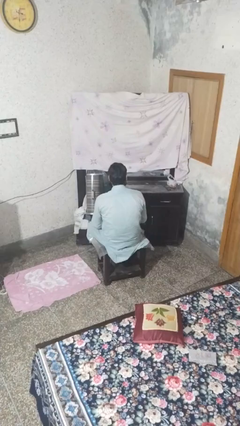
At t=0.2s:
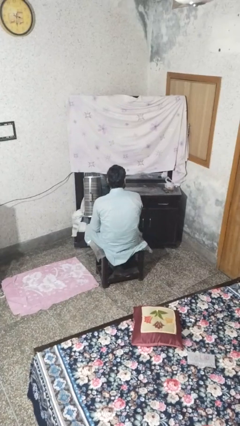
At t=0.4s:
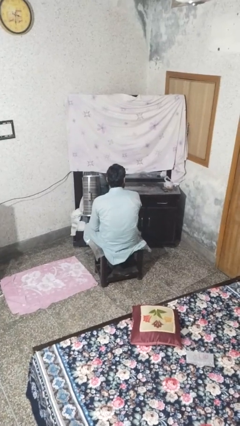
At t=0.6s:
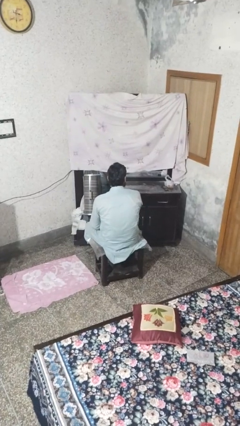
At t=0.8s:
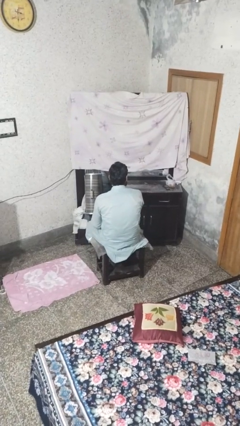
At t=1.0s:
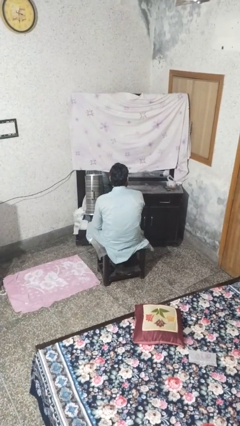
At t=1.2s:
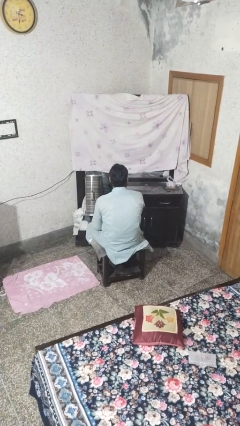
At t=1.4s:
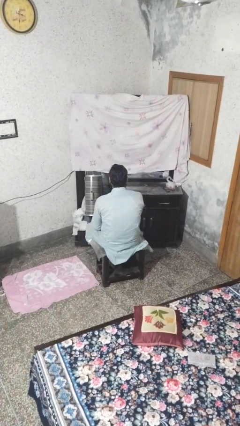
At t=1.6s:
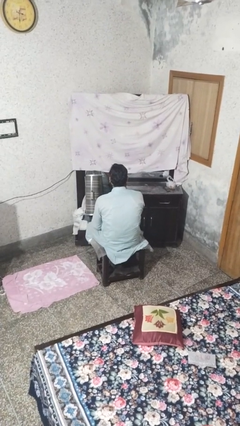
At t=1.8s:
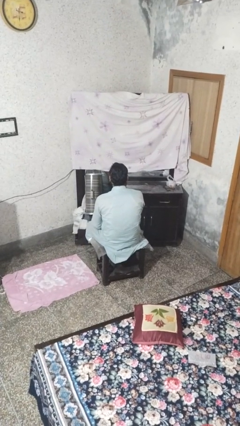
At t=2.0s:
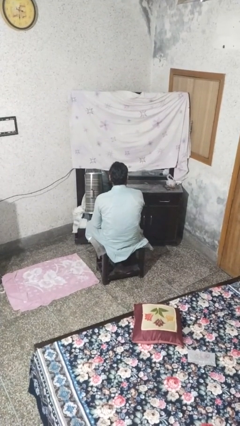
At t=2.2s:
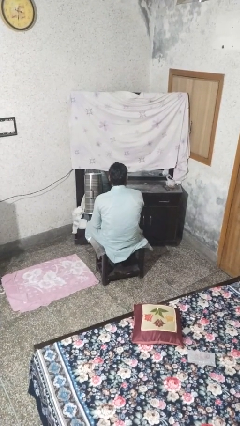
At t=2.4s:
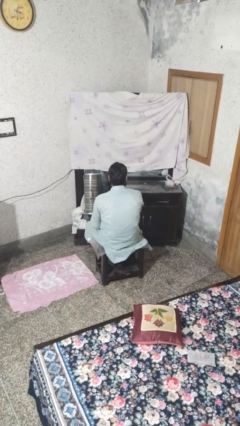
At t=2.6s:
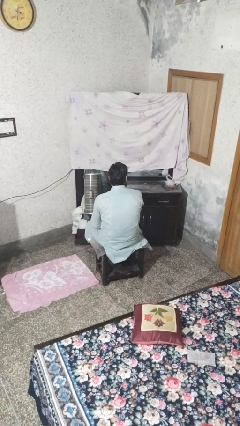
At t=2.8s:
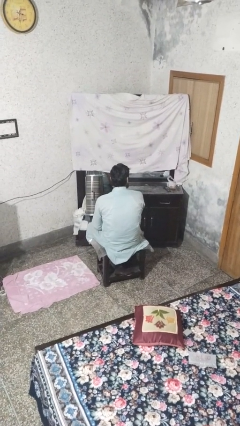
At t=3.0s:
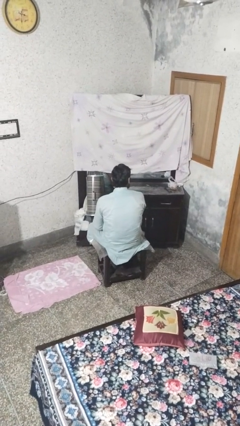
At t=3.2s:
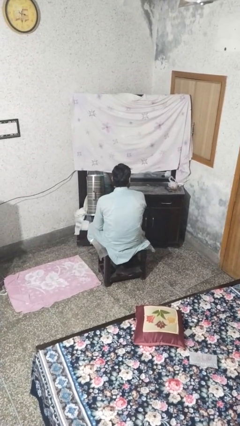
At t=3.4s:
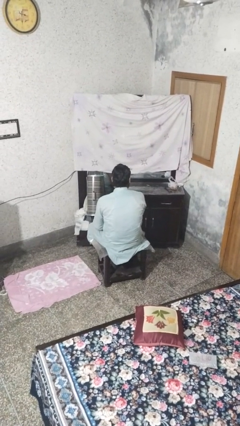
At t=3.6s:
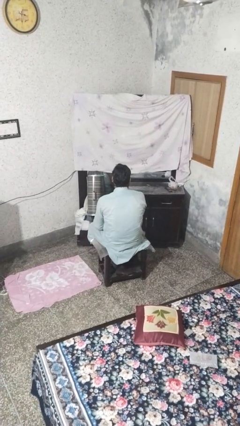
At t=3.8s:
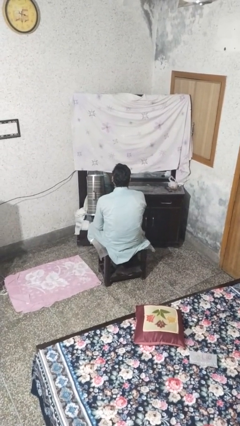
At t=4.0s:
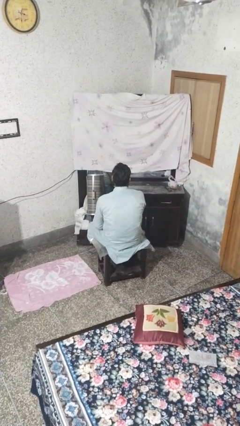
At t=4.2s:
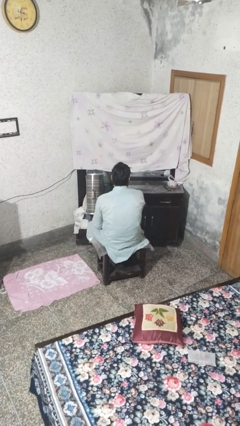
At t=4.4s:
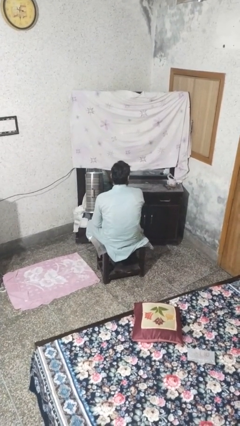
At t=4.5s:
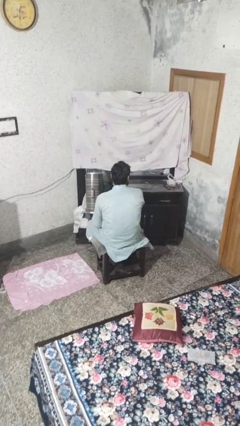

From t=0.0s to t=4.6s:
person applies lip makeup

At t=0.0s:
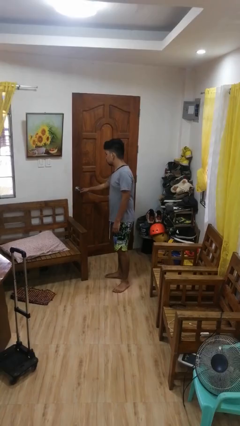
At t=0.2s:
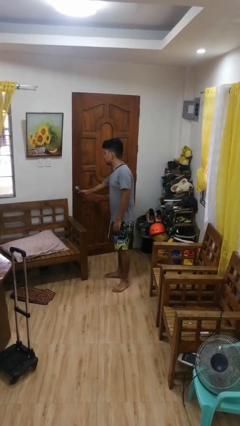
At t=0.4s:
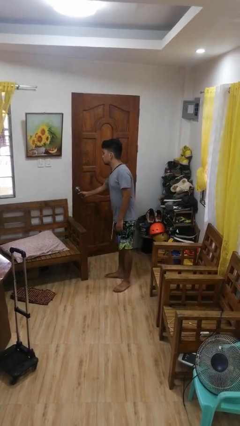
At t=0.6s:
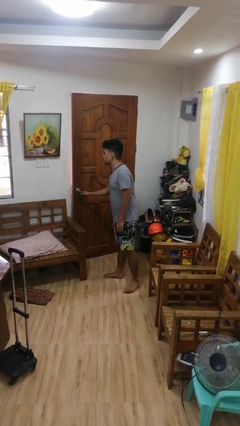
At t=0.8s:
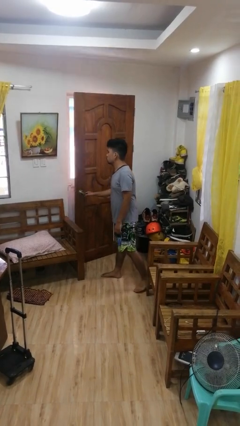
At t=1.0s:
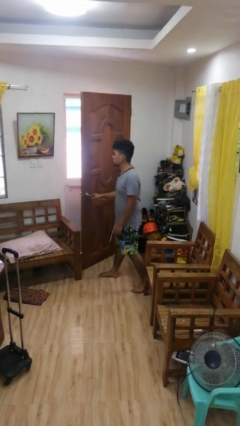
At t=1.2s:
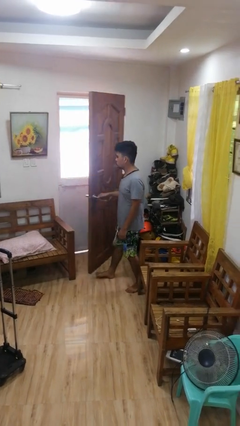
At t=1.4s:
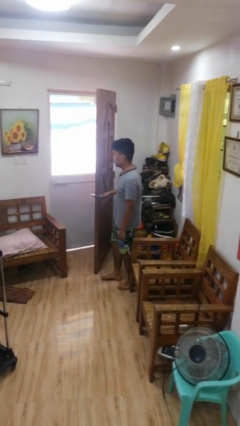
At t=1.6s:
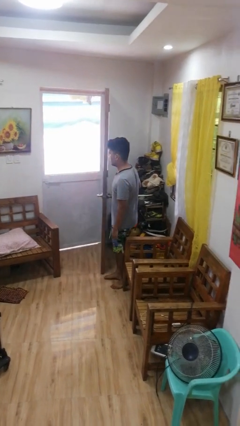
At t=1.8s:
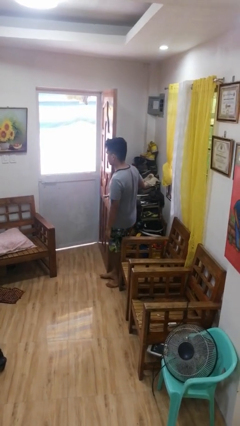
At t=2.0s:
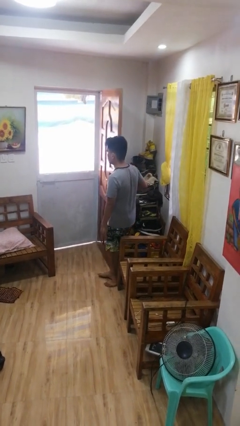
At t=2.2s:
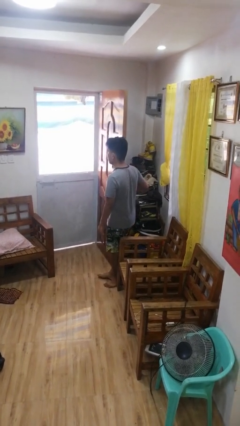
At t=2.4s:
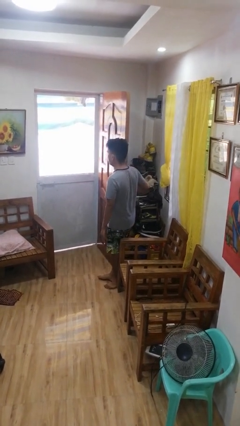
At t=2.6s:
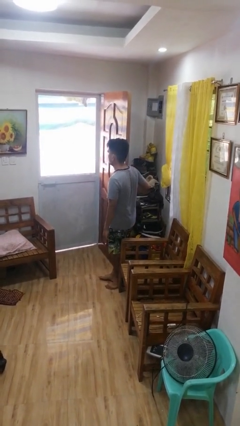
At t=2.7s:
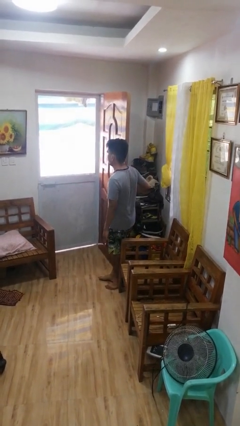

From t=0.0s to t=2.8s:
person opens facility door

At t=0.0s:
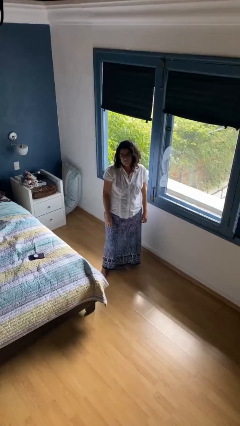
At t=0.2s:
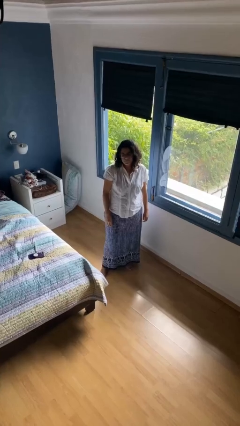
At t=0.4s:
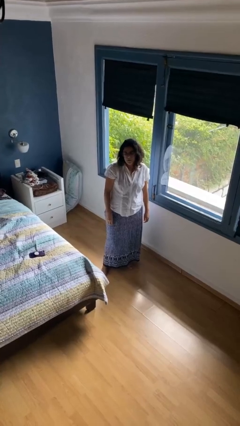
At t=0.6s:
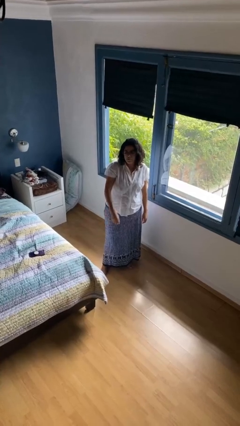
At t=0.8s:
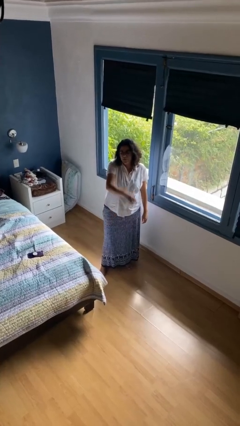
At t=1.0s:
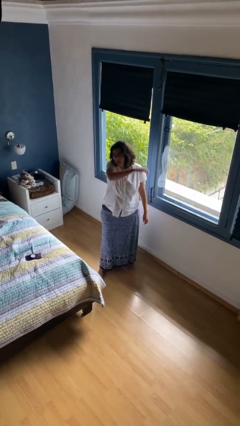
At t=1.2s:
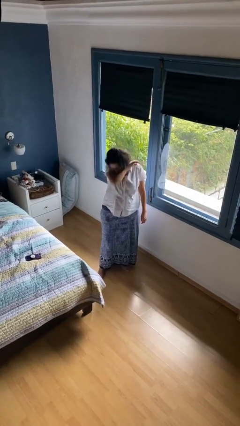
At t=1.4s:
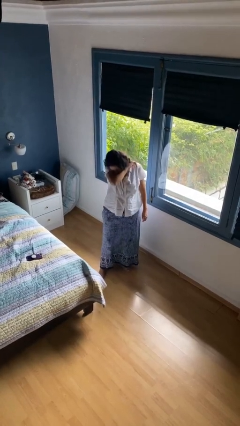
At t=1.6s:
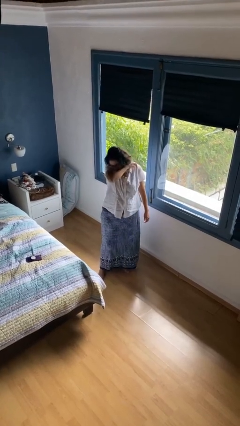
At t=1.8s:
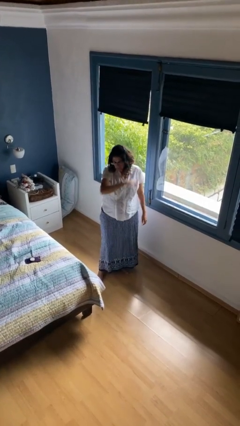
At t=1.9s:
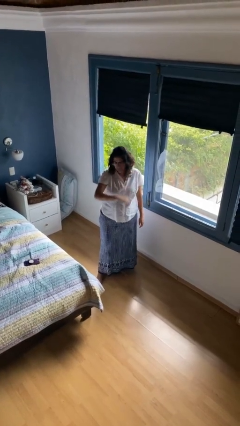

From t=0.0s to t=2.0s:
person sneezes into arm

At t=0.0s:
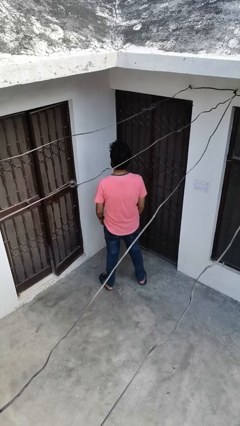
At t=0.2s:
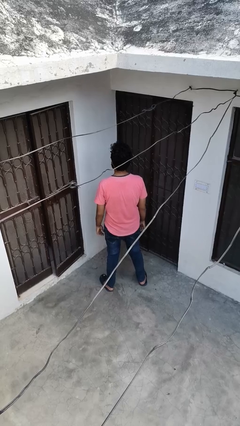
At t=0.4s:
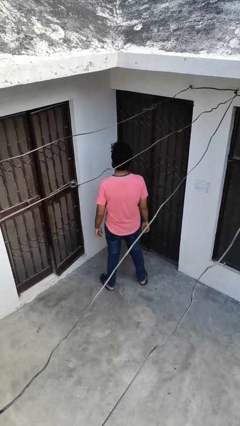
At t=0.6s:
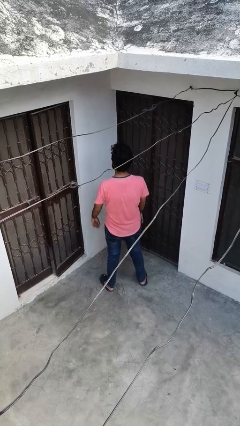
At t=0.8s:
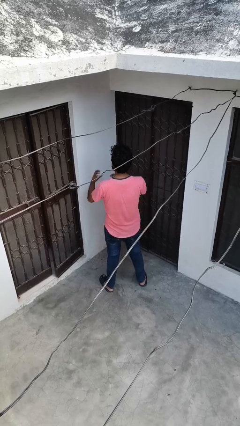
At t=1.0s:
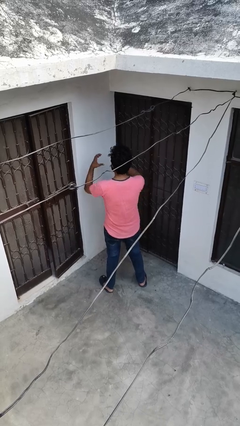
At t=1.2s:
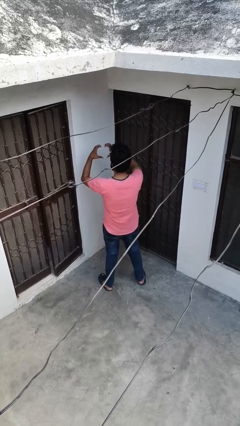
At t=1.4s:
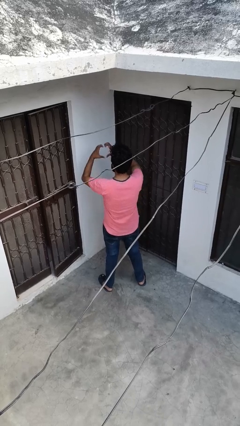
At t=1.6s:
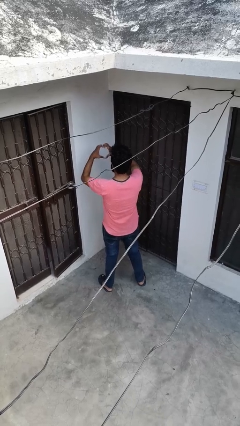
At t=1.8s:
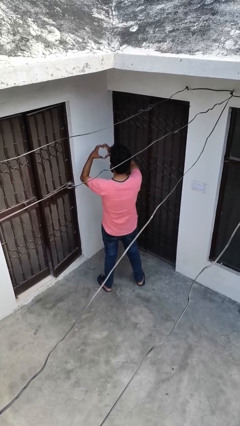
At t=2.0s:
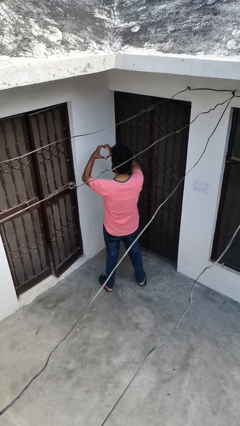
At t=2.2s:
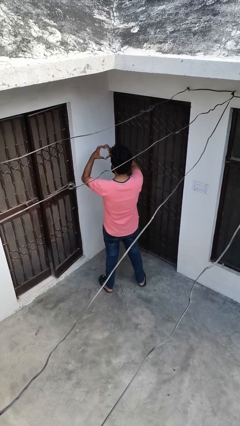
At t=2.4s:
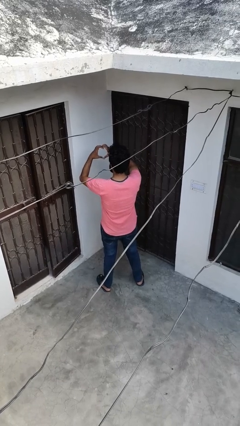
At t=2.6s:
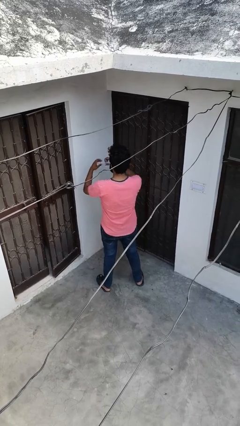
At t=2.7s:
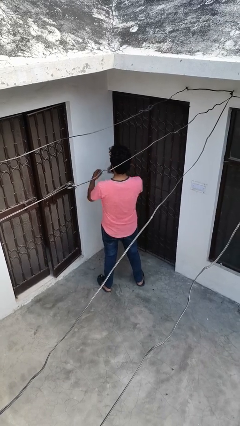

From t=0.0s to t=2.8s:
person gestures heart

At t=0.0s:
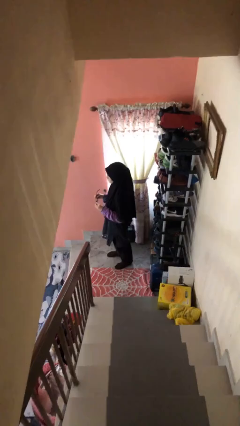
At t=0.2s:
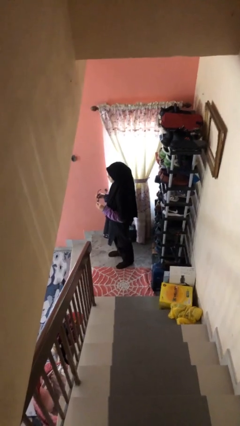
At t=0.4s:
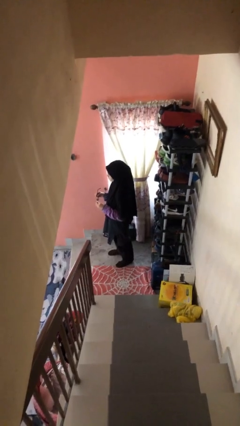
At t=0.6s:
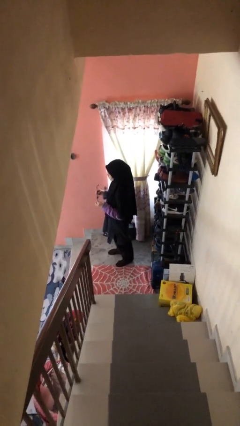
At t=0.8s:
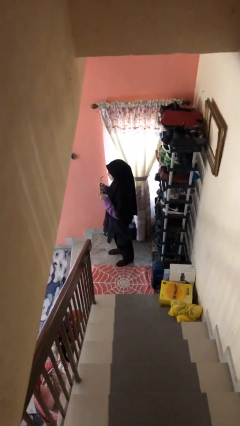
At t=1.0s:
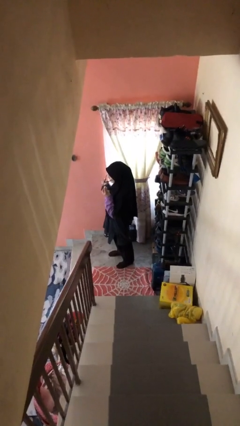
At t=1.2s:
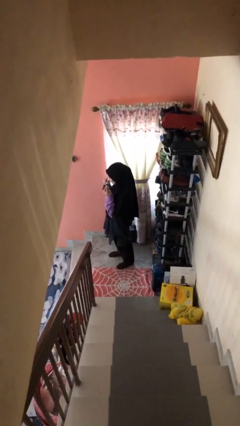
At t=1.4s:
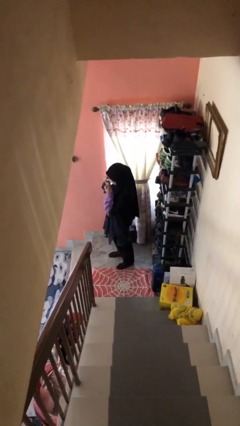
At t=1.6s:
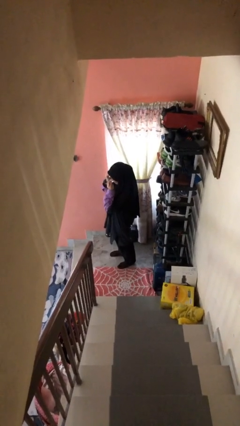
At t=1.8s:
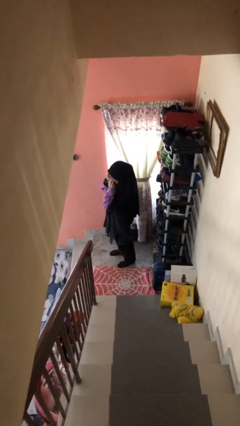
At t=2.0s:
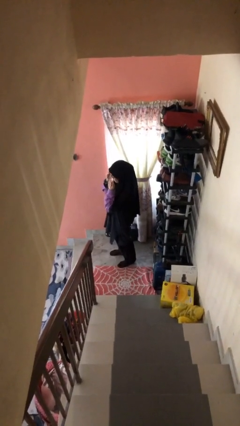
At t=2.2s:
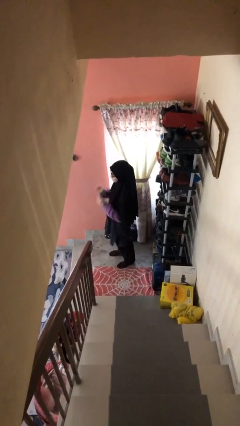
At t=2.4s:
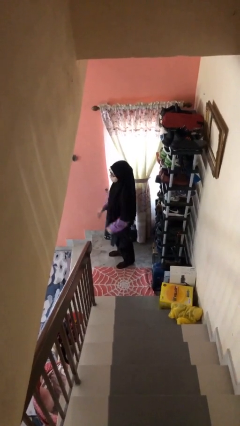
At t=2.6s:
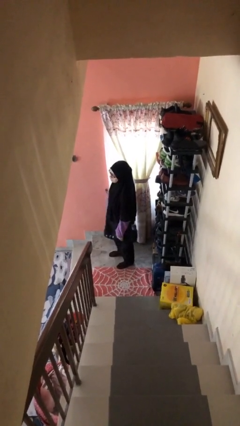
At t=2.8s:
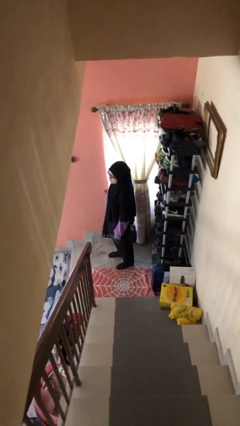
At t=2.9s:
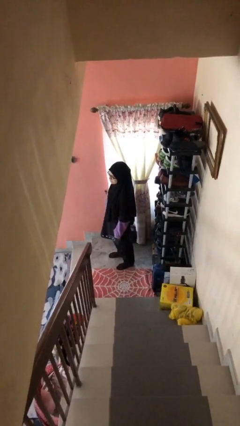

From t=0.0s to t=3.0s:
person puts on glasses

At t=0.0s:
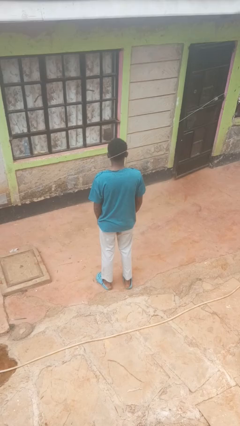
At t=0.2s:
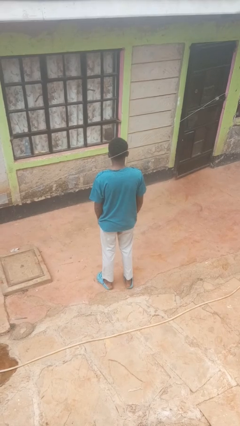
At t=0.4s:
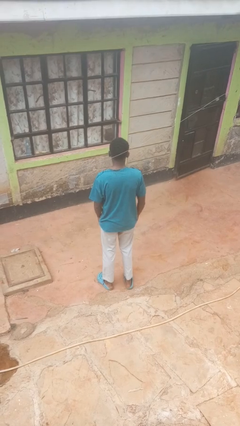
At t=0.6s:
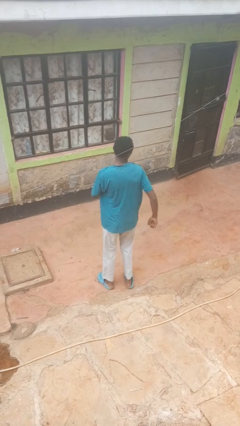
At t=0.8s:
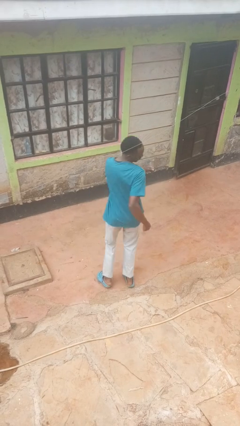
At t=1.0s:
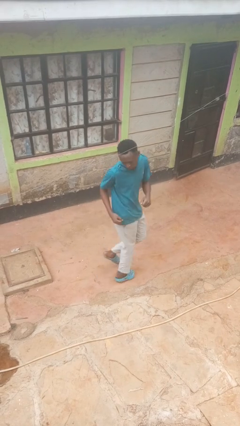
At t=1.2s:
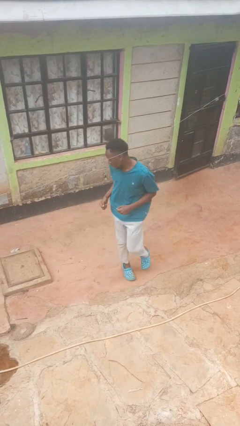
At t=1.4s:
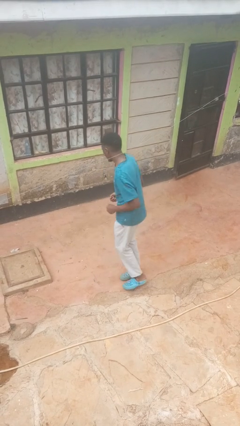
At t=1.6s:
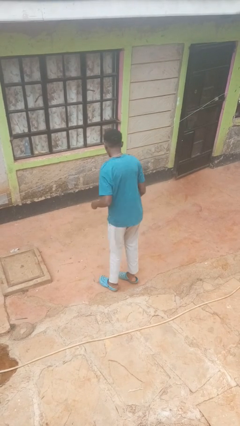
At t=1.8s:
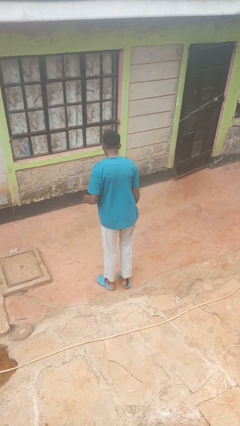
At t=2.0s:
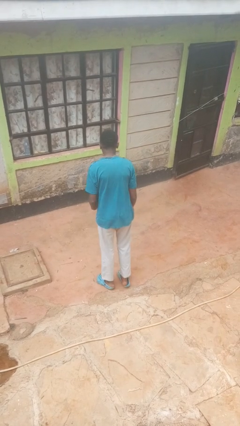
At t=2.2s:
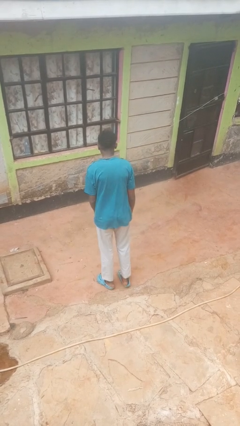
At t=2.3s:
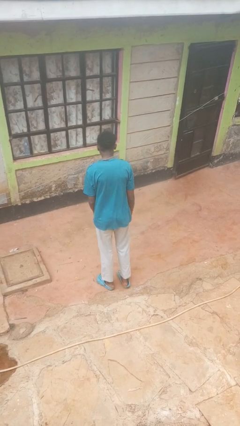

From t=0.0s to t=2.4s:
person twirls
